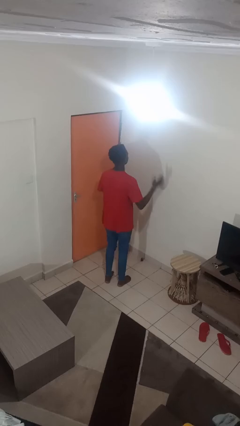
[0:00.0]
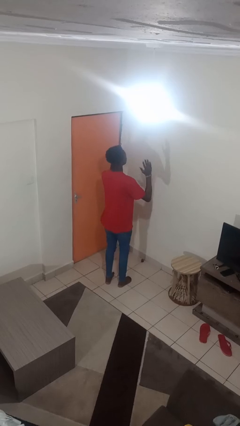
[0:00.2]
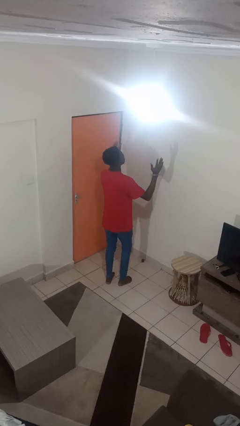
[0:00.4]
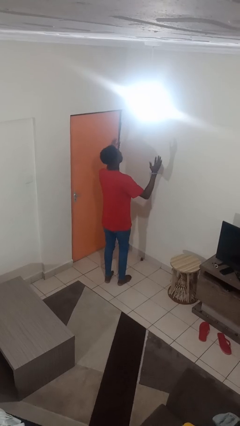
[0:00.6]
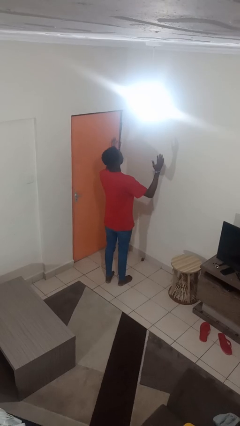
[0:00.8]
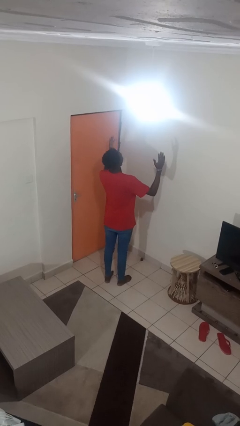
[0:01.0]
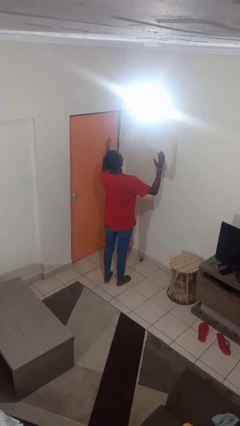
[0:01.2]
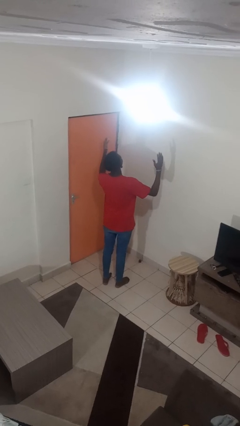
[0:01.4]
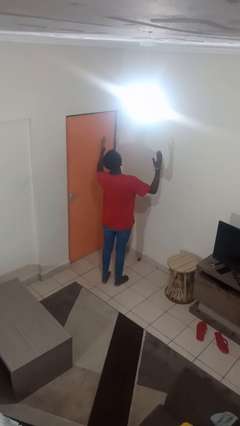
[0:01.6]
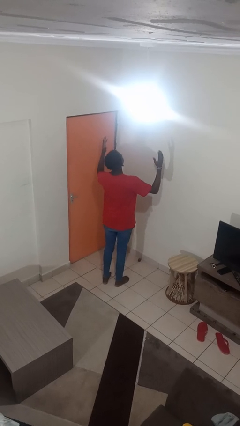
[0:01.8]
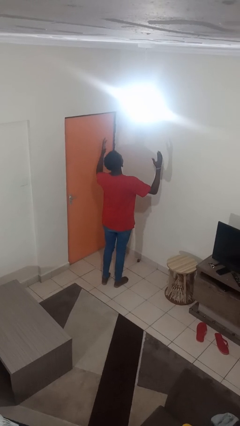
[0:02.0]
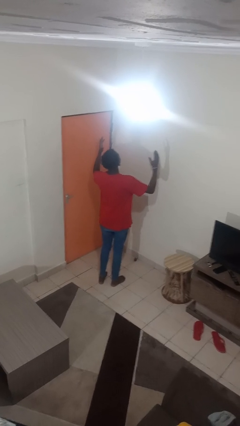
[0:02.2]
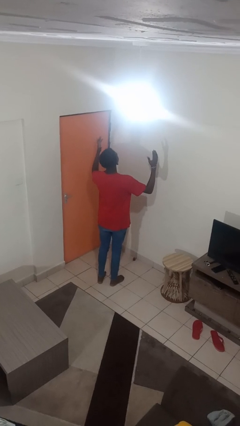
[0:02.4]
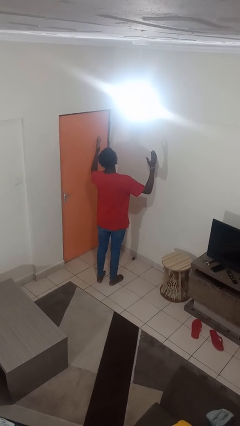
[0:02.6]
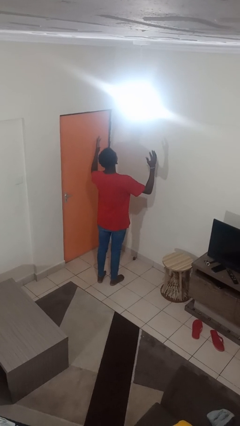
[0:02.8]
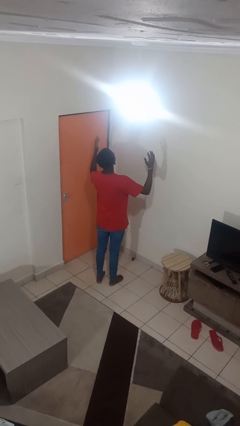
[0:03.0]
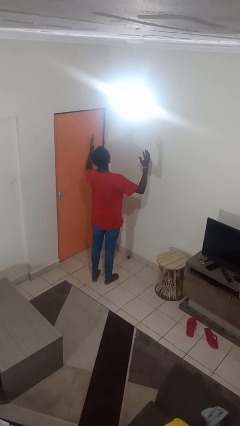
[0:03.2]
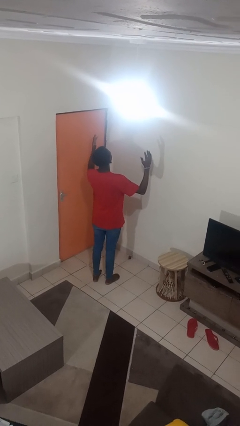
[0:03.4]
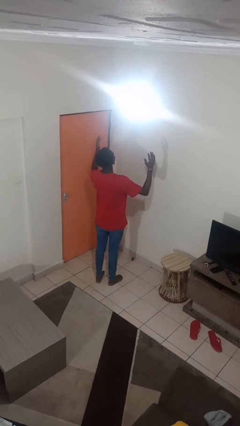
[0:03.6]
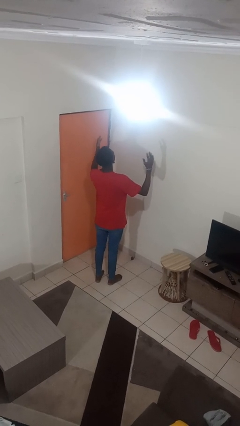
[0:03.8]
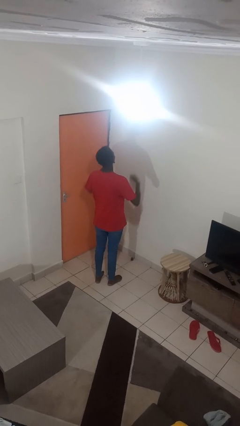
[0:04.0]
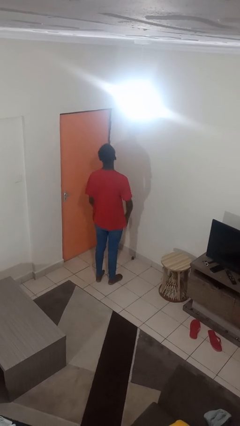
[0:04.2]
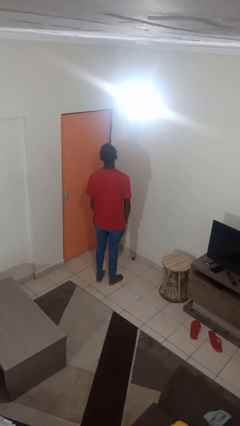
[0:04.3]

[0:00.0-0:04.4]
person prays

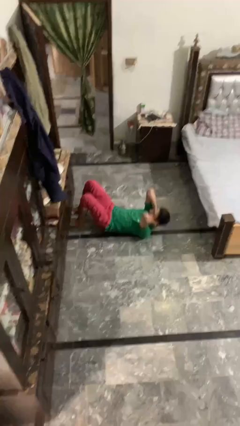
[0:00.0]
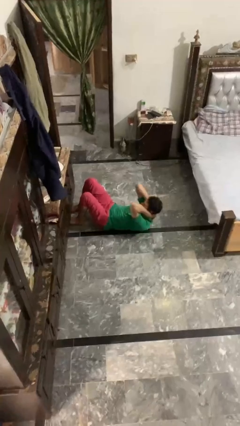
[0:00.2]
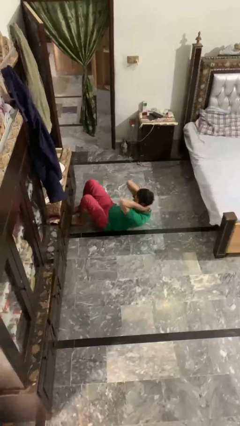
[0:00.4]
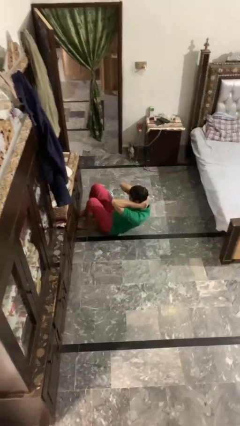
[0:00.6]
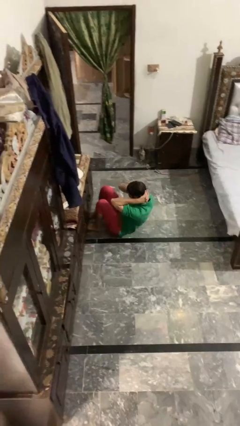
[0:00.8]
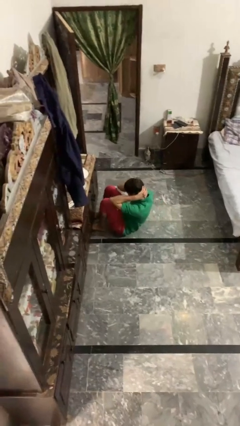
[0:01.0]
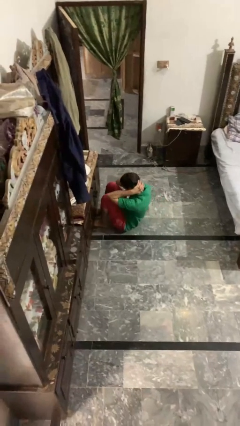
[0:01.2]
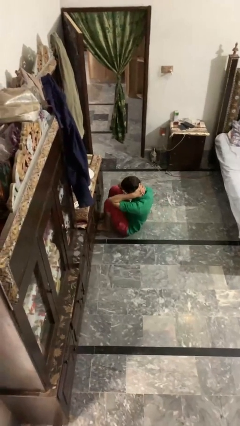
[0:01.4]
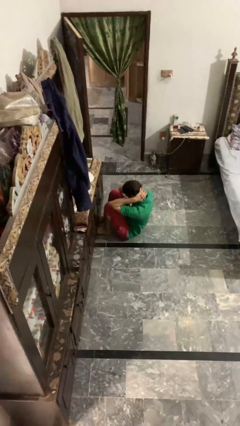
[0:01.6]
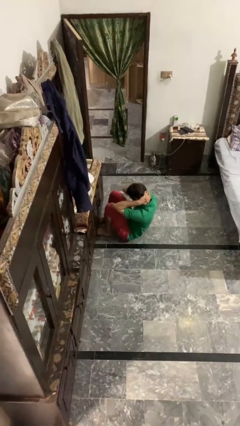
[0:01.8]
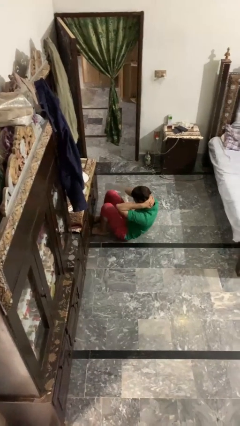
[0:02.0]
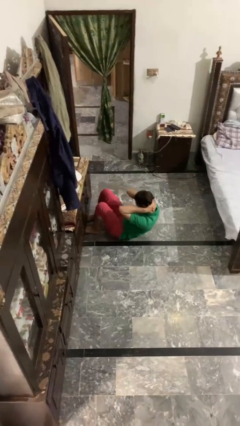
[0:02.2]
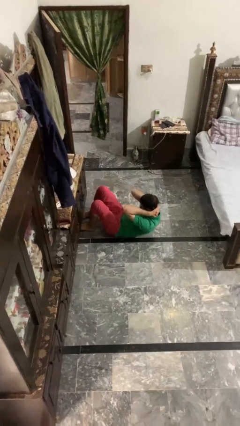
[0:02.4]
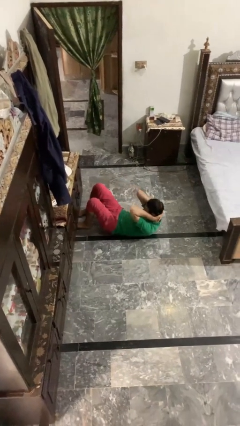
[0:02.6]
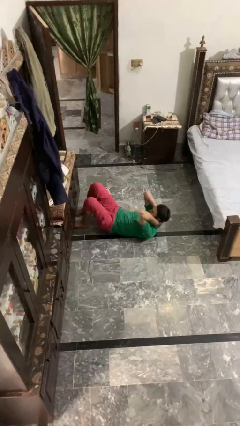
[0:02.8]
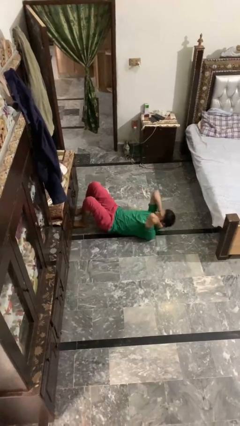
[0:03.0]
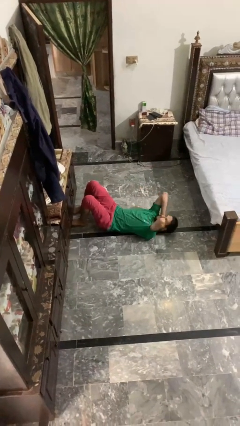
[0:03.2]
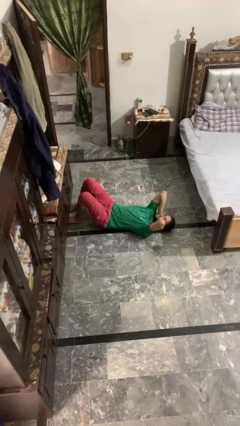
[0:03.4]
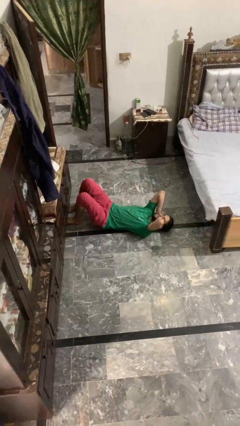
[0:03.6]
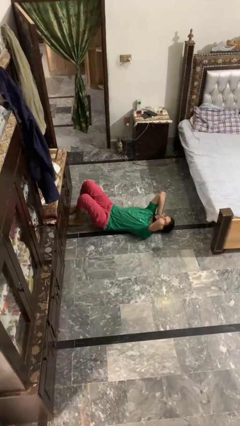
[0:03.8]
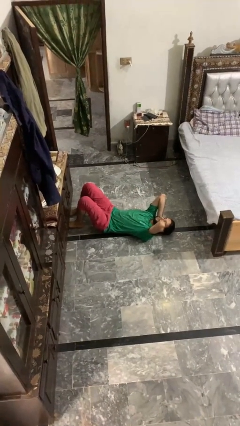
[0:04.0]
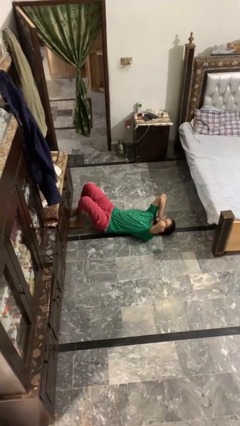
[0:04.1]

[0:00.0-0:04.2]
person exercises with situp

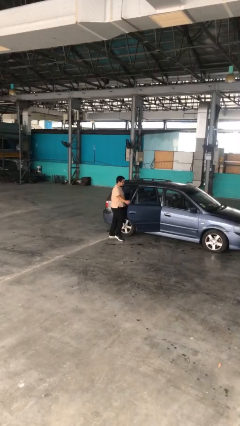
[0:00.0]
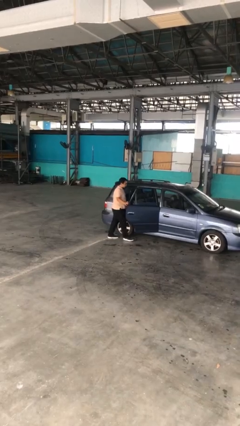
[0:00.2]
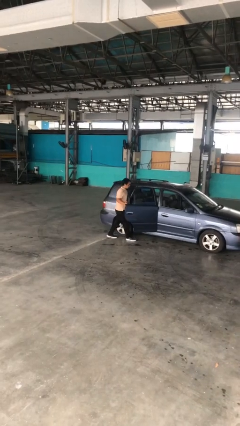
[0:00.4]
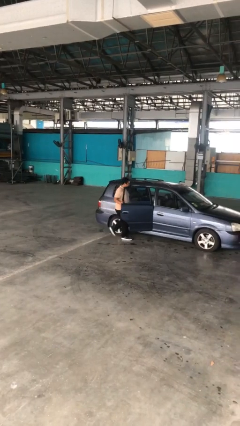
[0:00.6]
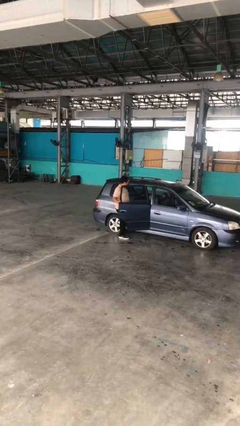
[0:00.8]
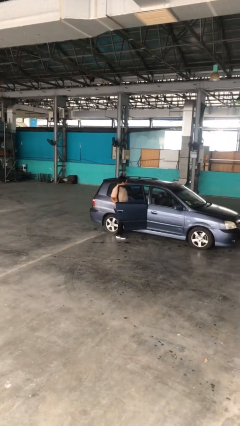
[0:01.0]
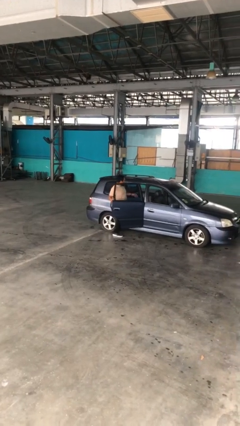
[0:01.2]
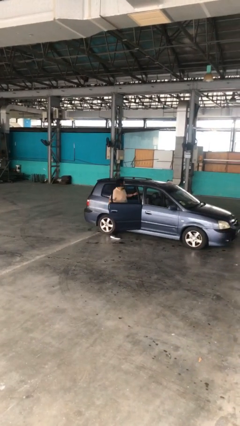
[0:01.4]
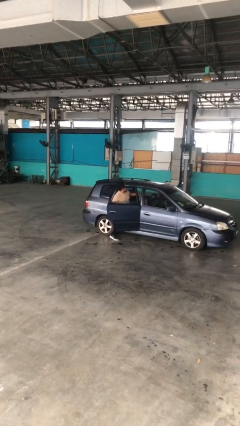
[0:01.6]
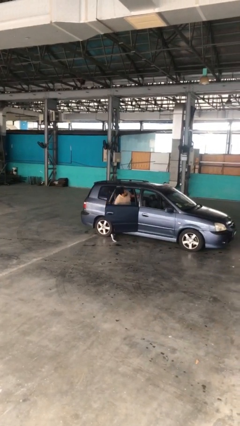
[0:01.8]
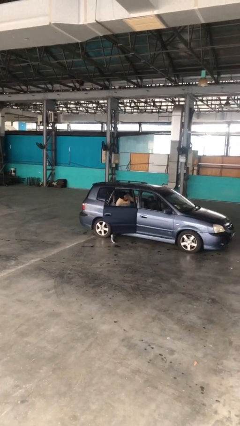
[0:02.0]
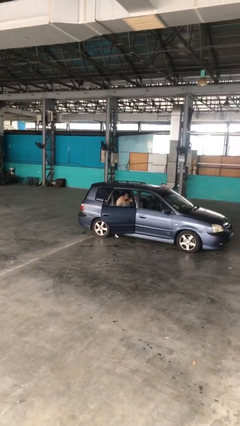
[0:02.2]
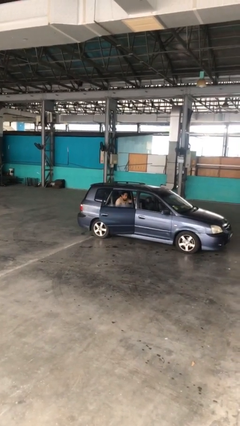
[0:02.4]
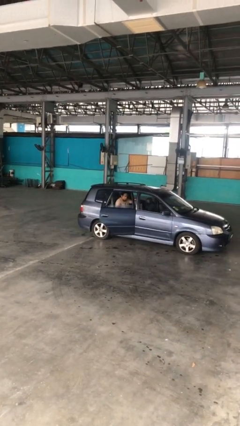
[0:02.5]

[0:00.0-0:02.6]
person enters car

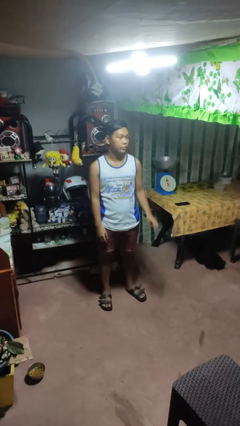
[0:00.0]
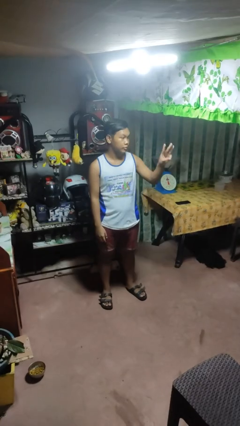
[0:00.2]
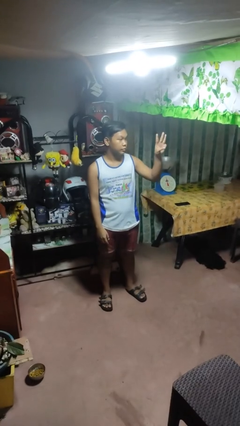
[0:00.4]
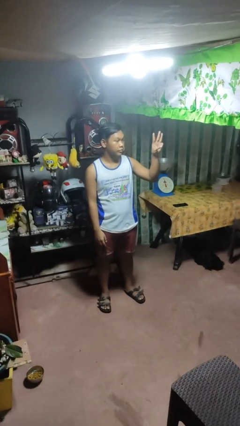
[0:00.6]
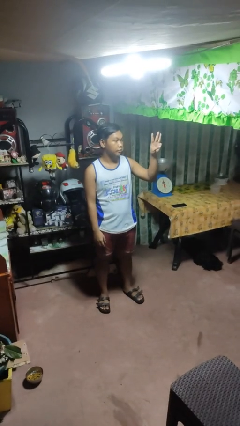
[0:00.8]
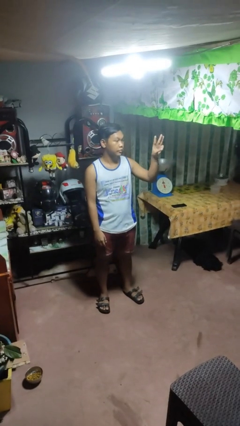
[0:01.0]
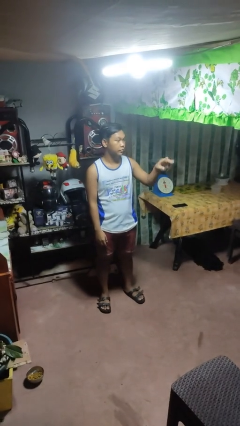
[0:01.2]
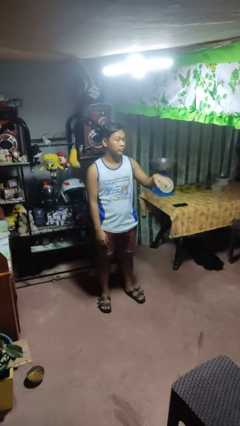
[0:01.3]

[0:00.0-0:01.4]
person gestures number three

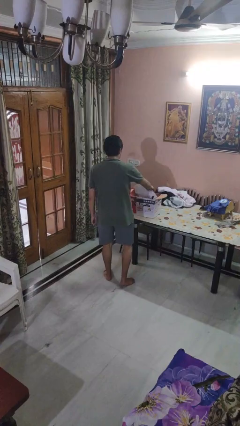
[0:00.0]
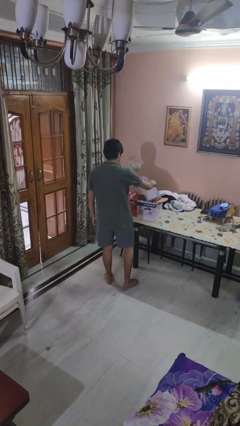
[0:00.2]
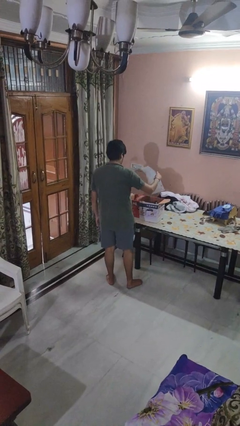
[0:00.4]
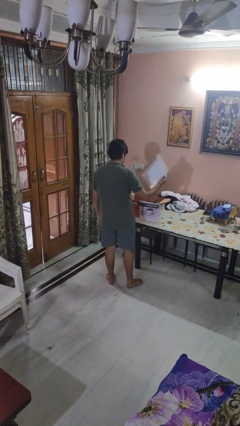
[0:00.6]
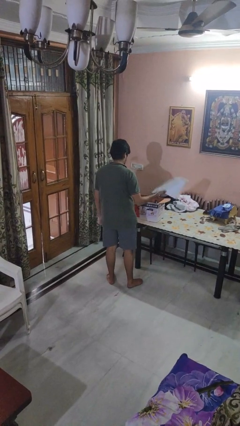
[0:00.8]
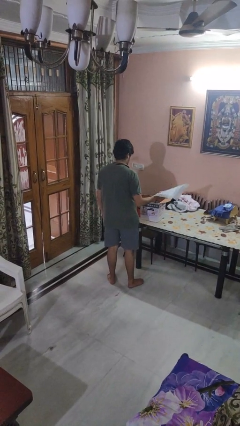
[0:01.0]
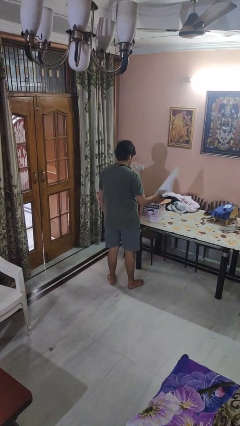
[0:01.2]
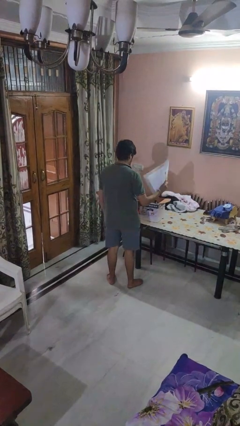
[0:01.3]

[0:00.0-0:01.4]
person takes object from box

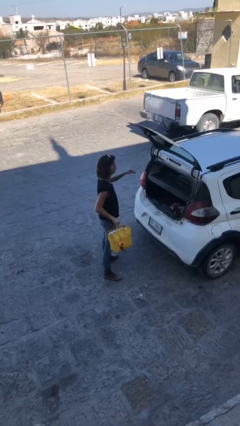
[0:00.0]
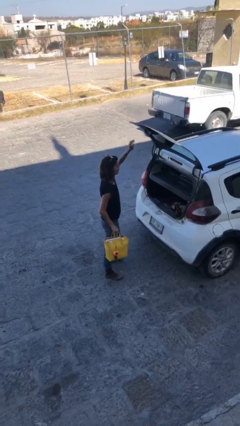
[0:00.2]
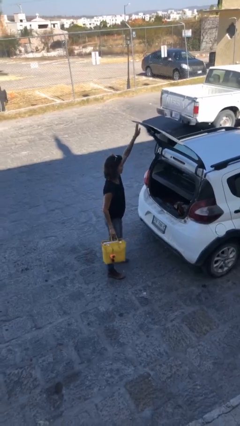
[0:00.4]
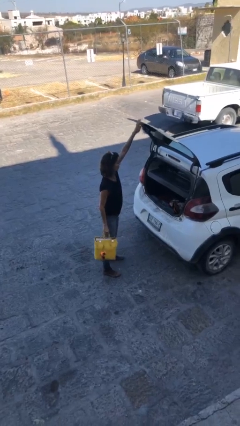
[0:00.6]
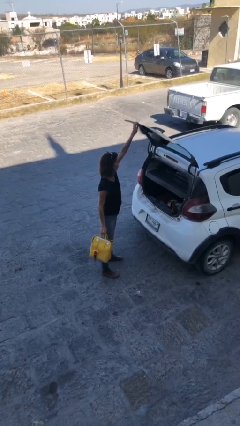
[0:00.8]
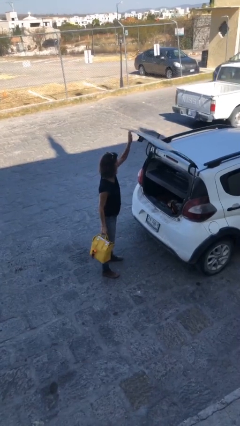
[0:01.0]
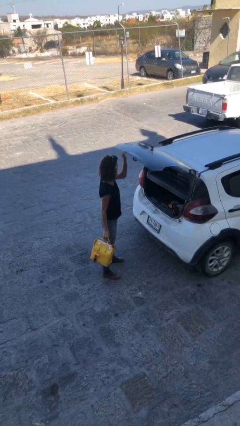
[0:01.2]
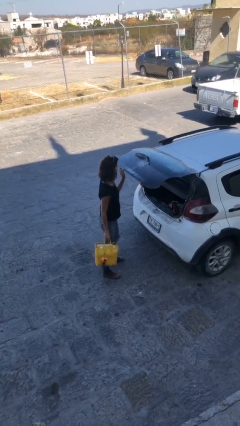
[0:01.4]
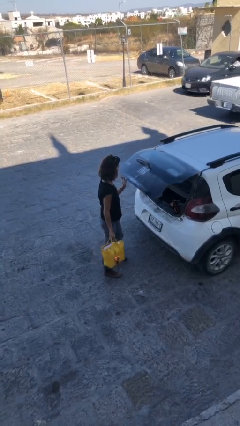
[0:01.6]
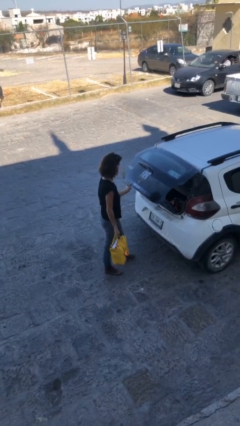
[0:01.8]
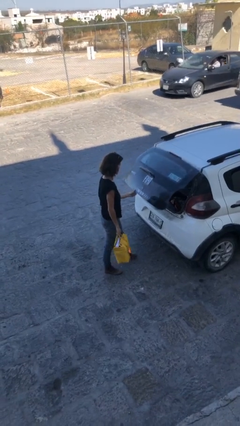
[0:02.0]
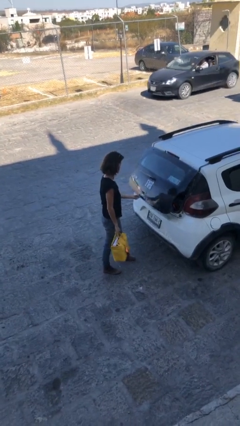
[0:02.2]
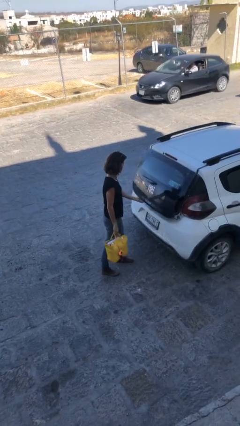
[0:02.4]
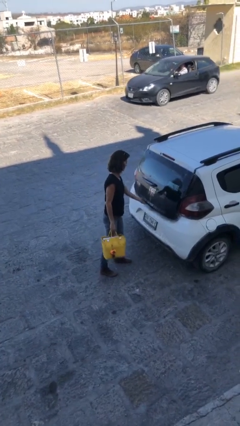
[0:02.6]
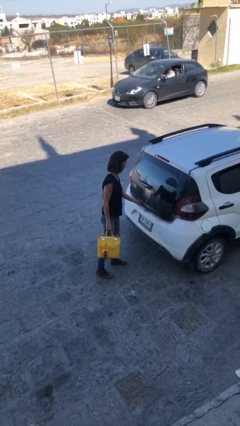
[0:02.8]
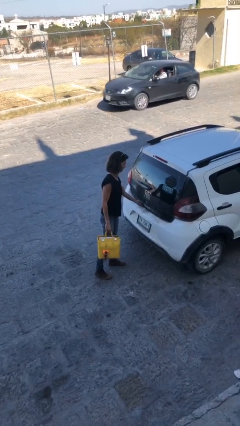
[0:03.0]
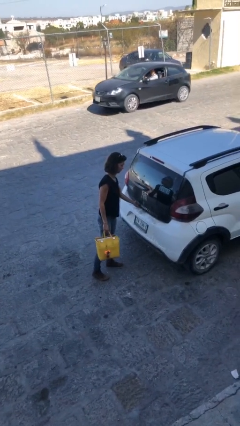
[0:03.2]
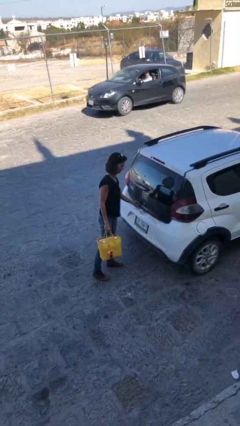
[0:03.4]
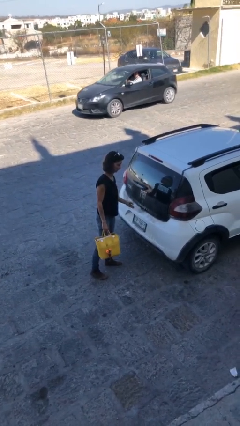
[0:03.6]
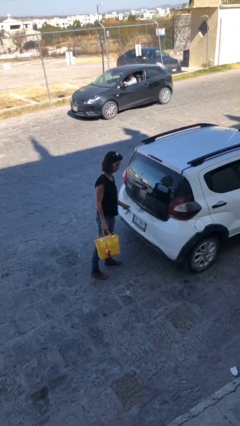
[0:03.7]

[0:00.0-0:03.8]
person closes car trunk
